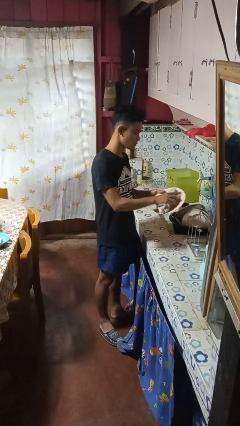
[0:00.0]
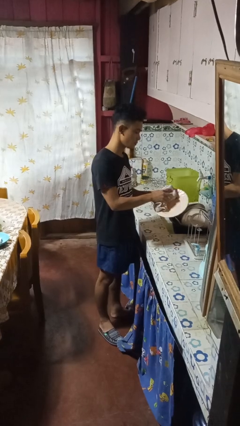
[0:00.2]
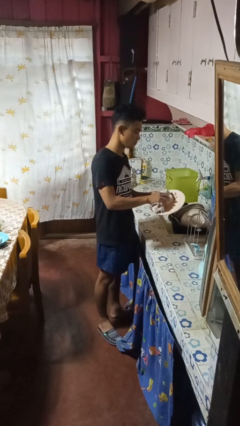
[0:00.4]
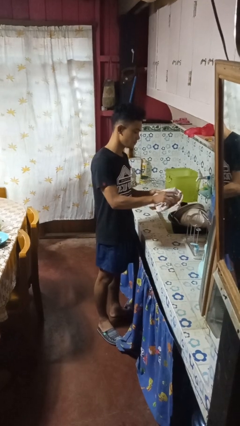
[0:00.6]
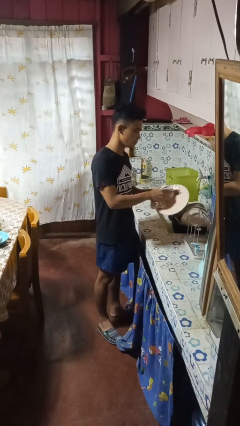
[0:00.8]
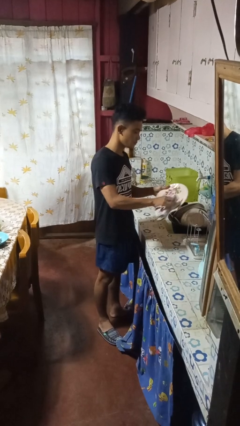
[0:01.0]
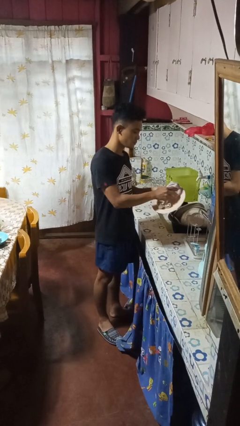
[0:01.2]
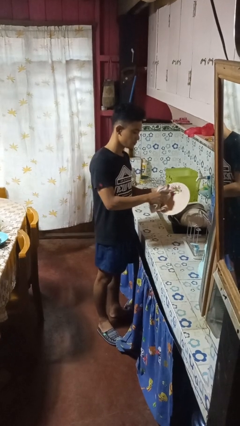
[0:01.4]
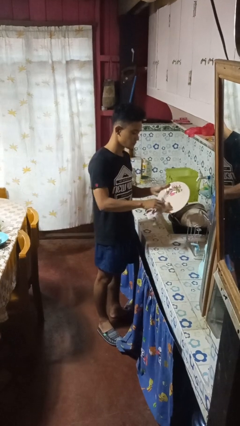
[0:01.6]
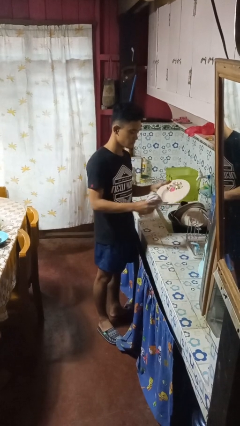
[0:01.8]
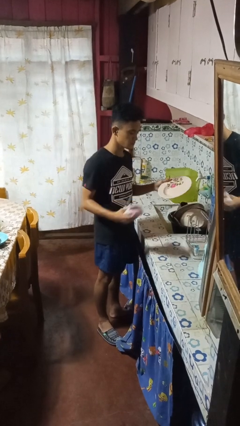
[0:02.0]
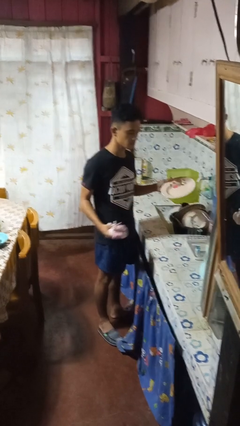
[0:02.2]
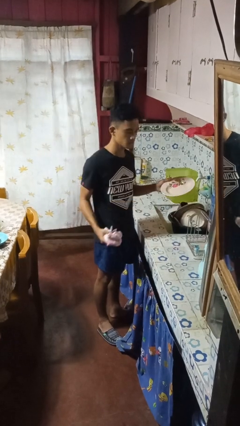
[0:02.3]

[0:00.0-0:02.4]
person dries dish

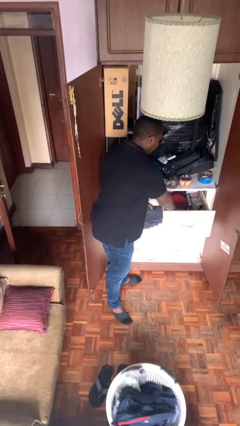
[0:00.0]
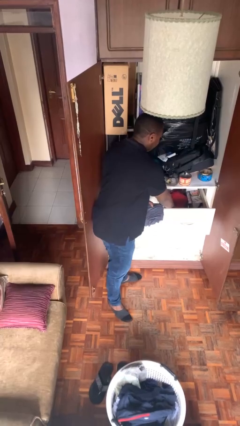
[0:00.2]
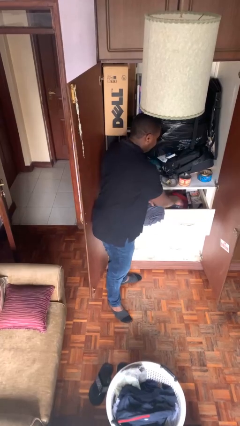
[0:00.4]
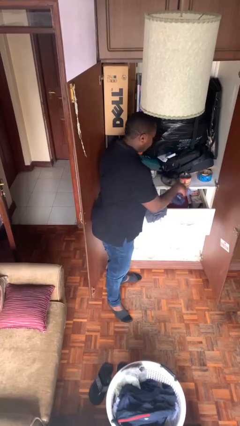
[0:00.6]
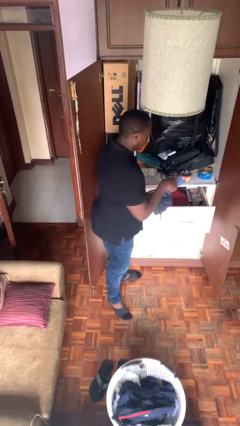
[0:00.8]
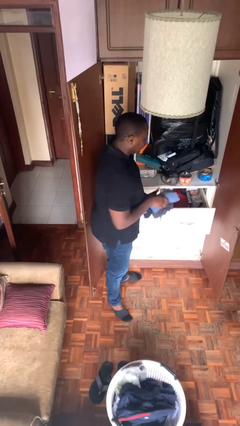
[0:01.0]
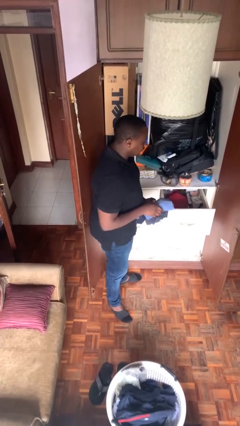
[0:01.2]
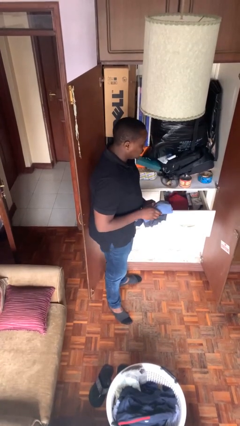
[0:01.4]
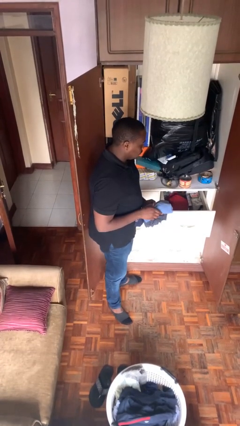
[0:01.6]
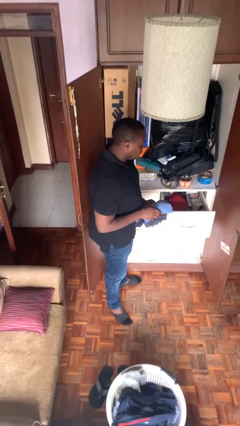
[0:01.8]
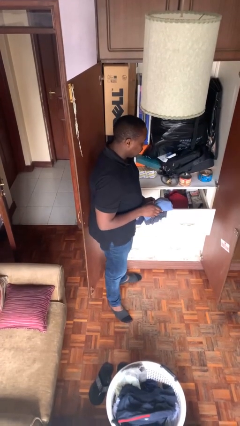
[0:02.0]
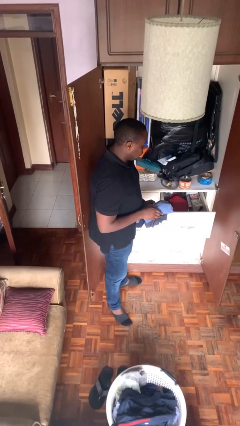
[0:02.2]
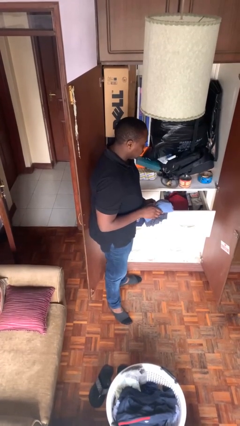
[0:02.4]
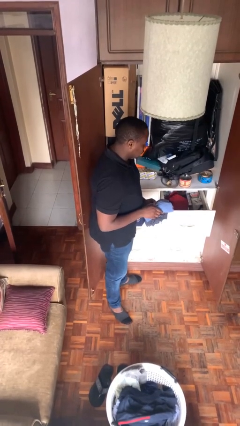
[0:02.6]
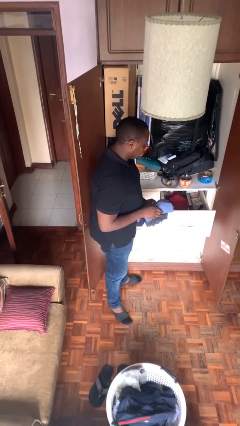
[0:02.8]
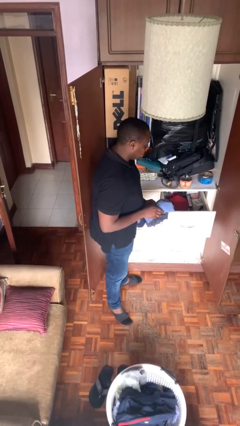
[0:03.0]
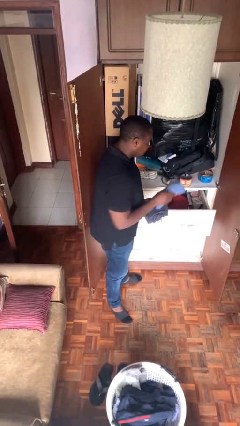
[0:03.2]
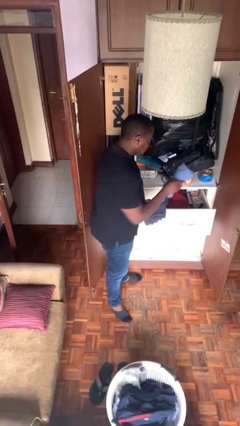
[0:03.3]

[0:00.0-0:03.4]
person takes clothes from dresser

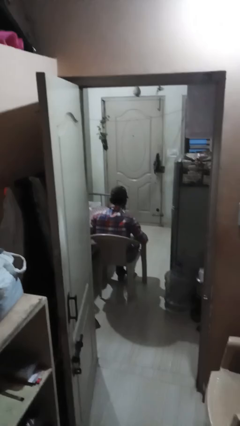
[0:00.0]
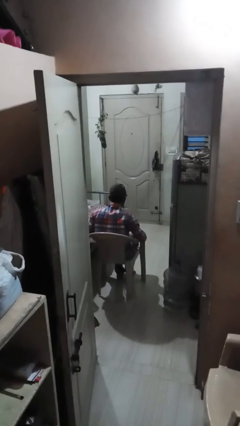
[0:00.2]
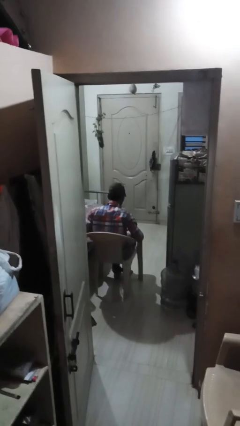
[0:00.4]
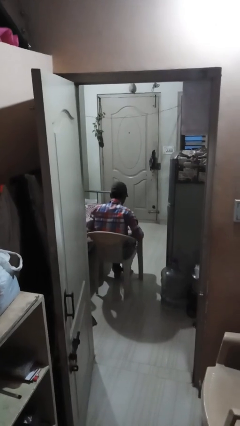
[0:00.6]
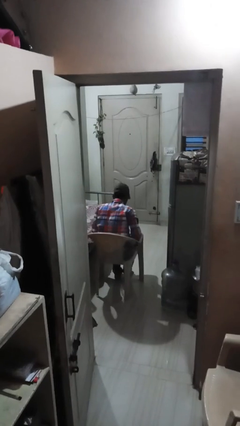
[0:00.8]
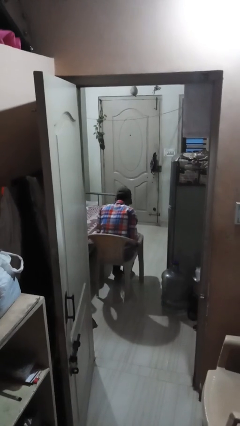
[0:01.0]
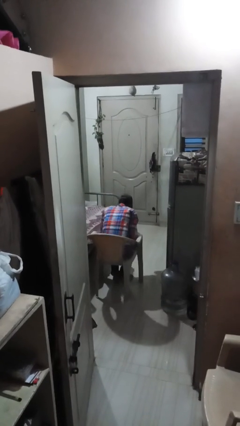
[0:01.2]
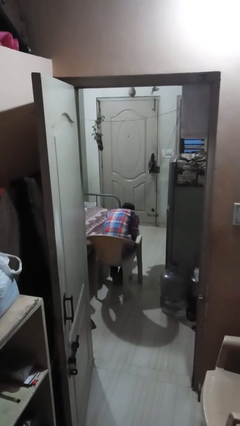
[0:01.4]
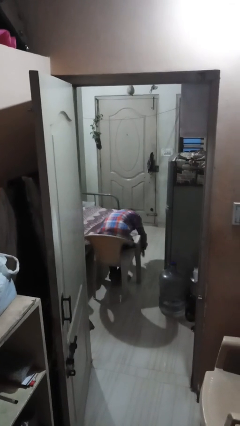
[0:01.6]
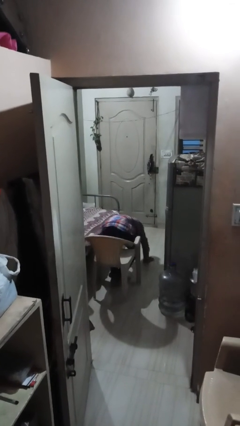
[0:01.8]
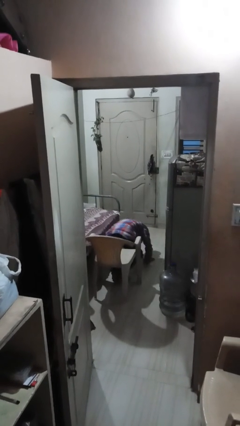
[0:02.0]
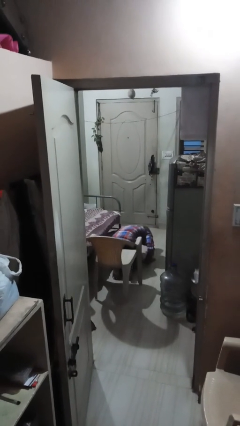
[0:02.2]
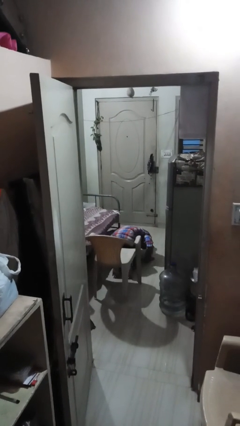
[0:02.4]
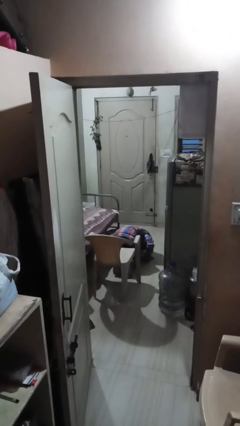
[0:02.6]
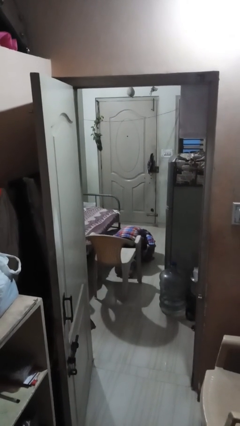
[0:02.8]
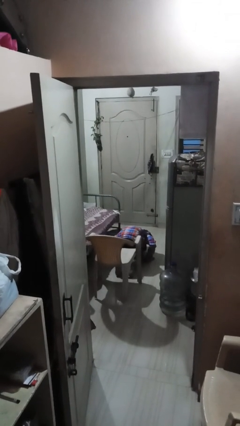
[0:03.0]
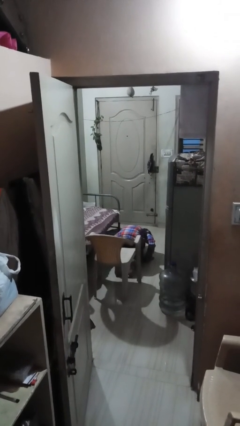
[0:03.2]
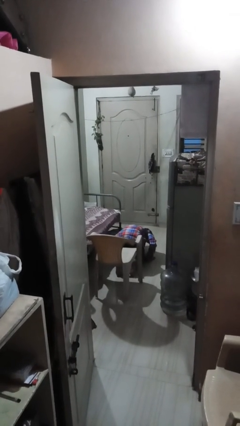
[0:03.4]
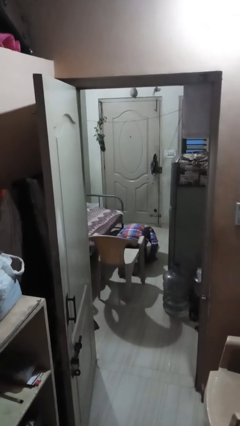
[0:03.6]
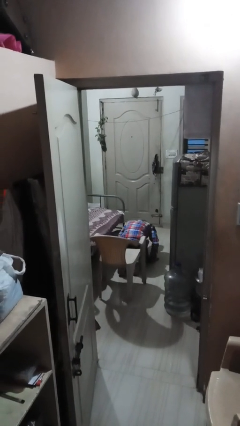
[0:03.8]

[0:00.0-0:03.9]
person falls from chair

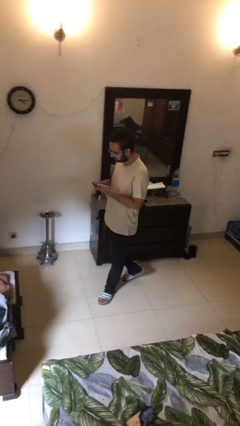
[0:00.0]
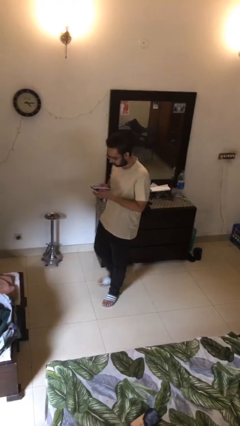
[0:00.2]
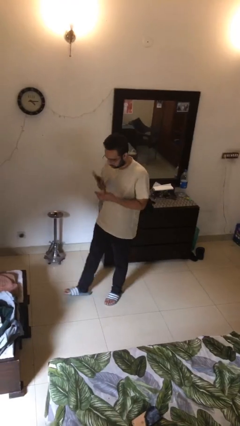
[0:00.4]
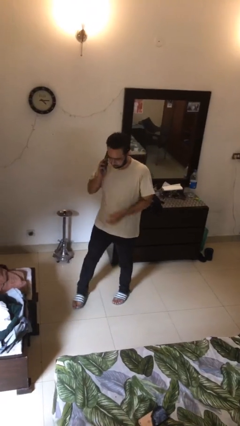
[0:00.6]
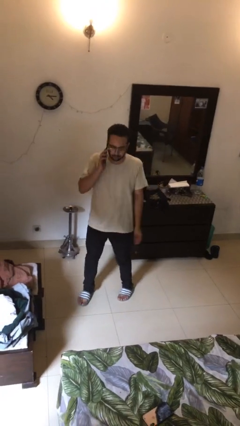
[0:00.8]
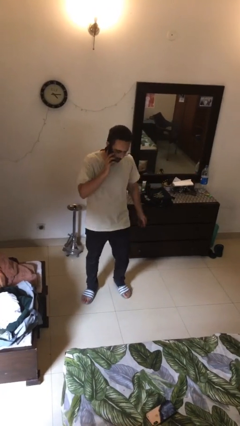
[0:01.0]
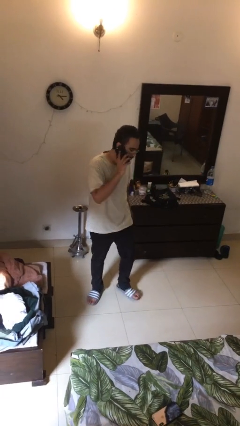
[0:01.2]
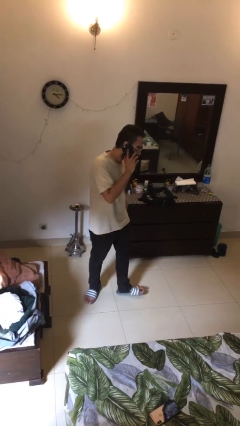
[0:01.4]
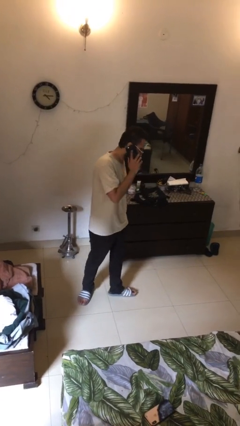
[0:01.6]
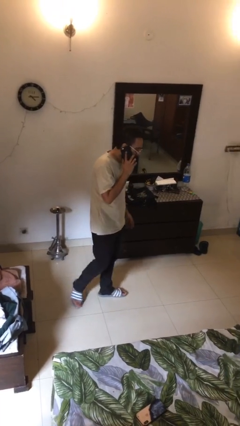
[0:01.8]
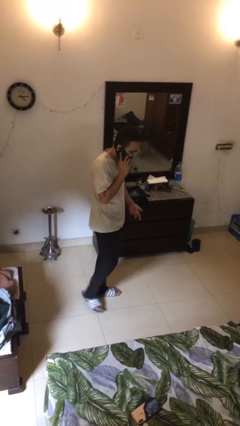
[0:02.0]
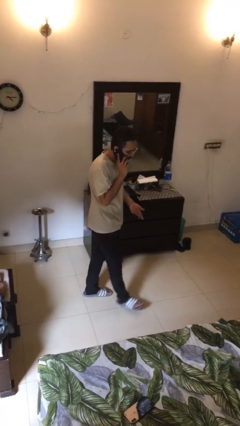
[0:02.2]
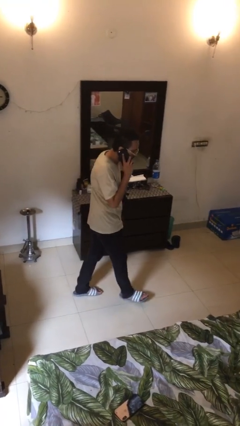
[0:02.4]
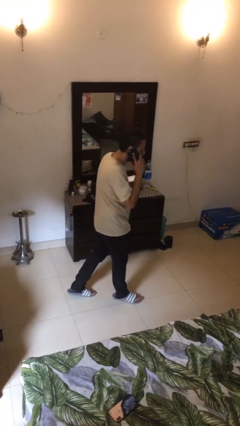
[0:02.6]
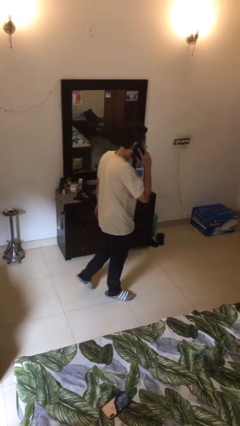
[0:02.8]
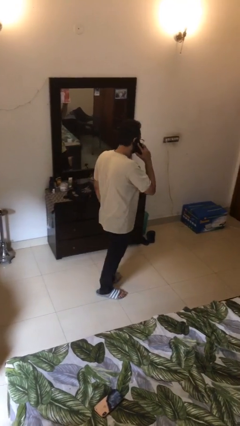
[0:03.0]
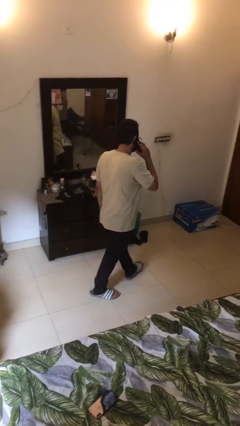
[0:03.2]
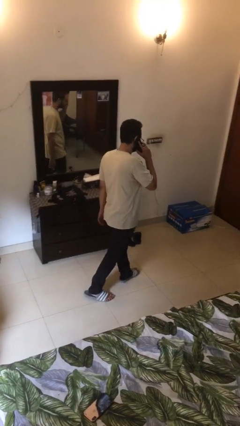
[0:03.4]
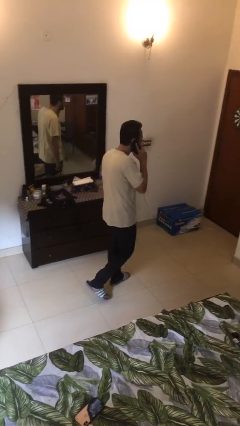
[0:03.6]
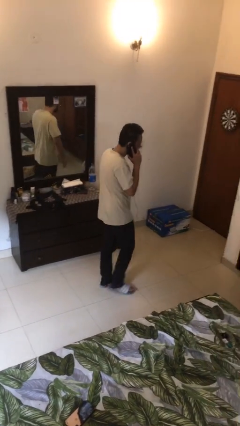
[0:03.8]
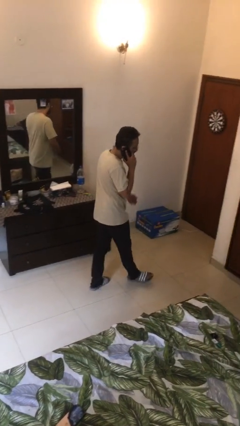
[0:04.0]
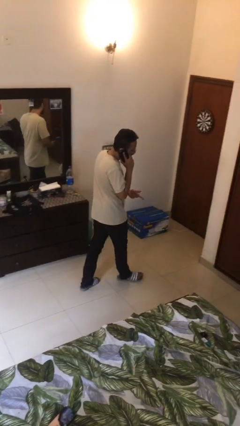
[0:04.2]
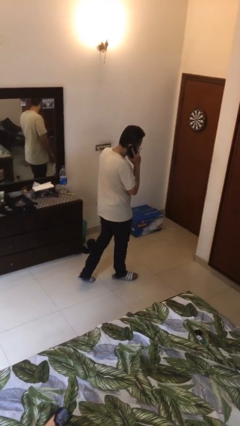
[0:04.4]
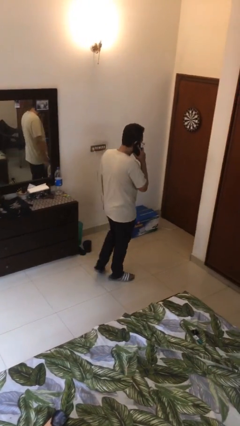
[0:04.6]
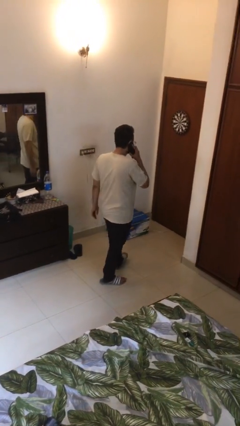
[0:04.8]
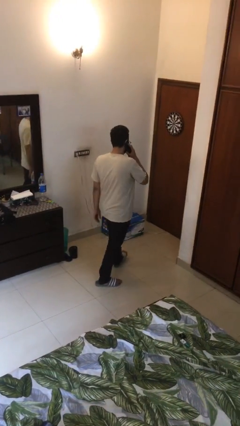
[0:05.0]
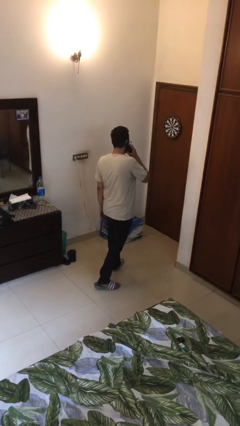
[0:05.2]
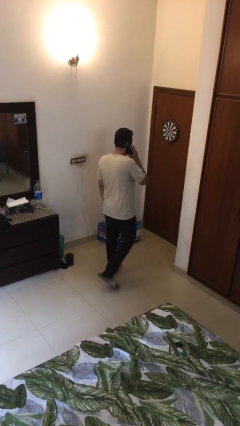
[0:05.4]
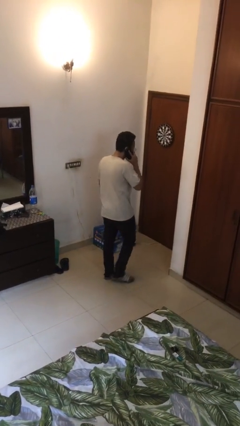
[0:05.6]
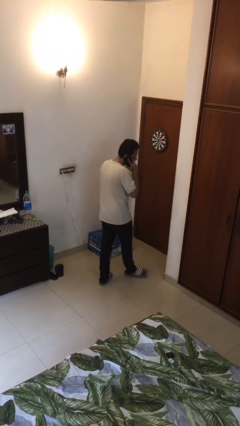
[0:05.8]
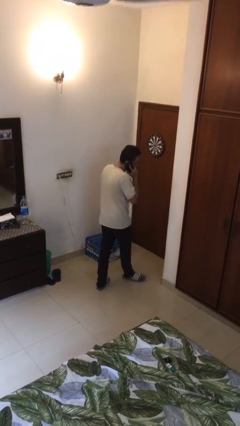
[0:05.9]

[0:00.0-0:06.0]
person talks on phone

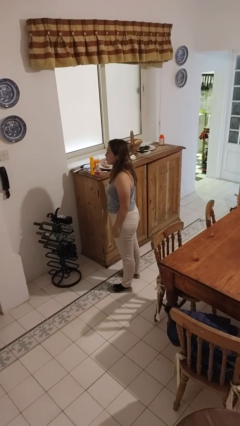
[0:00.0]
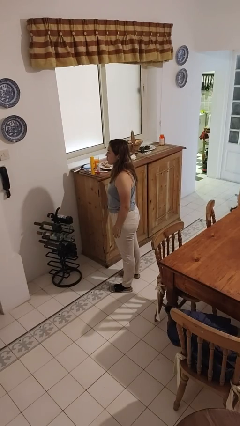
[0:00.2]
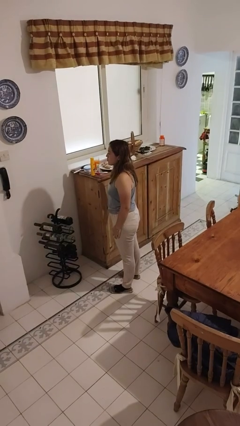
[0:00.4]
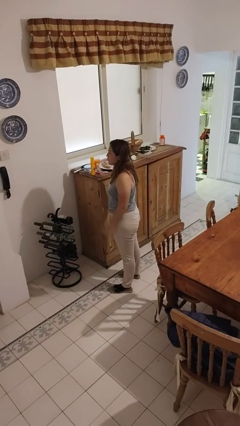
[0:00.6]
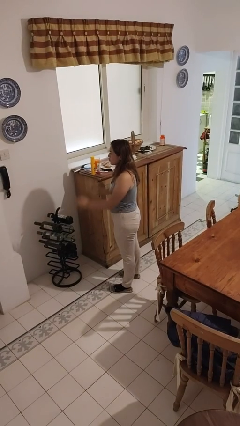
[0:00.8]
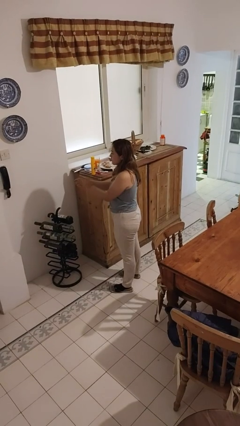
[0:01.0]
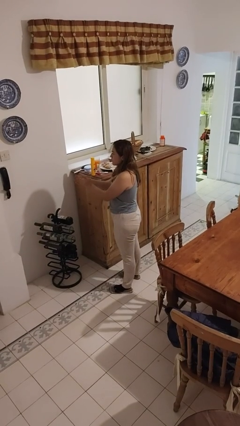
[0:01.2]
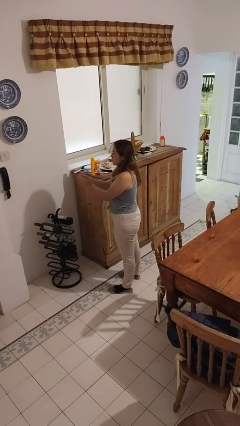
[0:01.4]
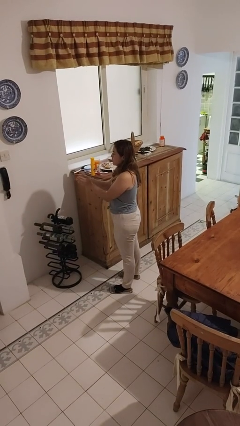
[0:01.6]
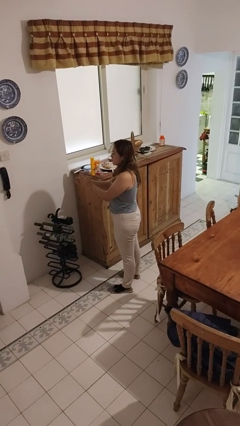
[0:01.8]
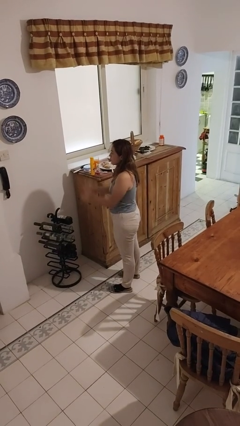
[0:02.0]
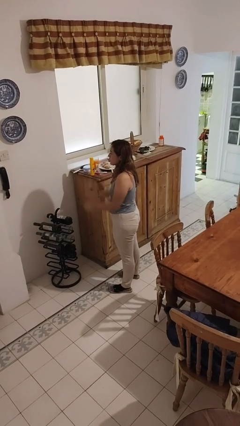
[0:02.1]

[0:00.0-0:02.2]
person claps hands
